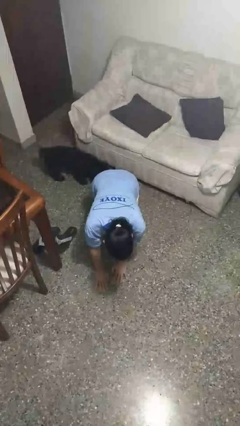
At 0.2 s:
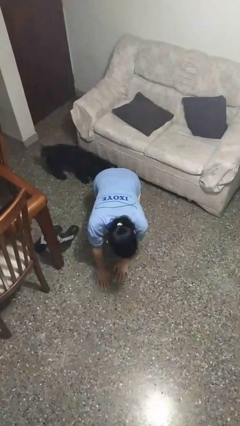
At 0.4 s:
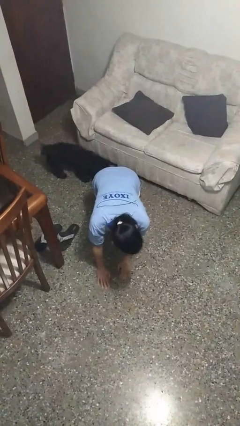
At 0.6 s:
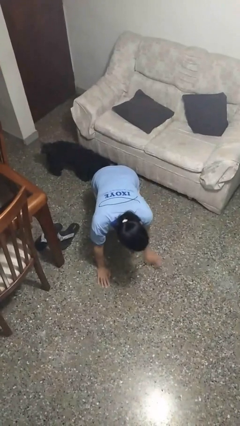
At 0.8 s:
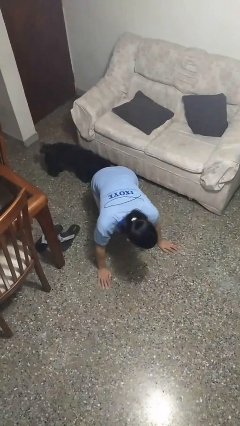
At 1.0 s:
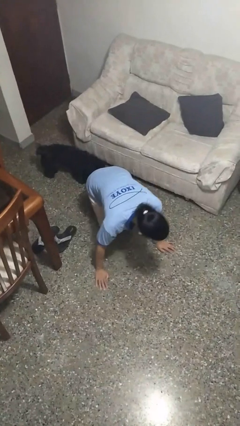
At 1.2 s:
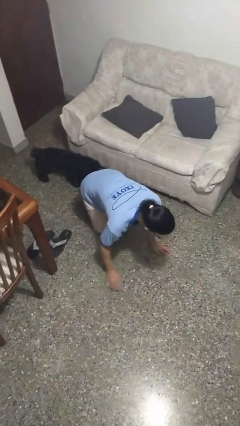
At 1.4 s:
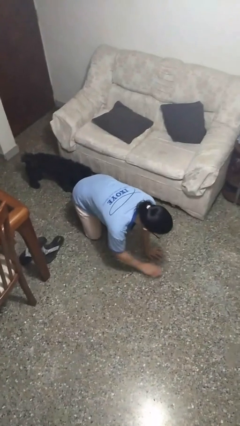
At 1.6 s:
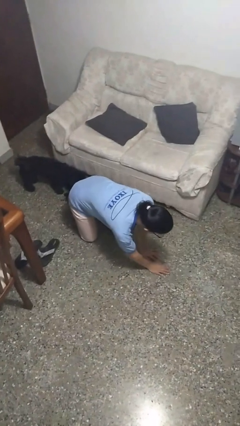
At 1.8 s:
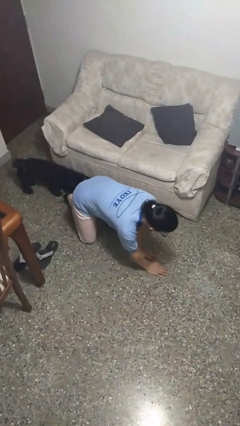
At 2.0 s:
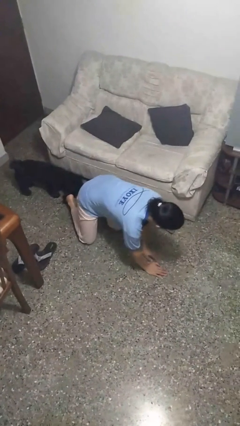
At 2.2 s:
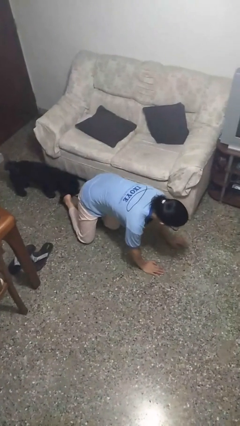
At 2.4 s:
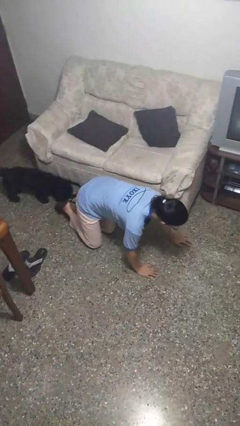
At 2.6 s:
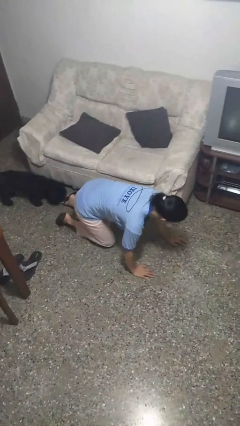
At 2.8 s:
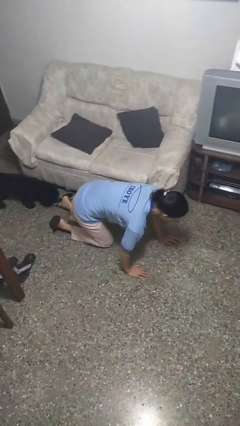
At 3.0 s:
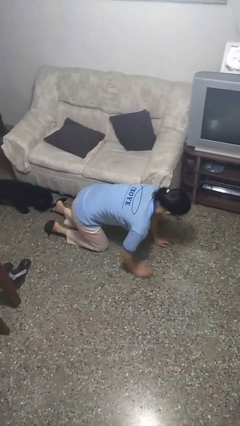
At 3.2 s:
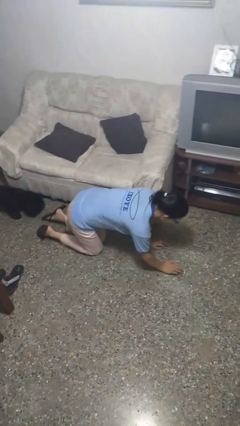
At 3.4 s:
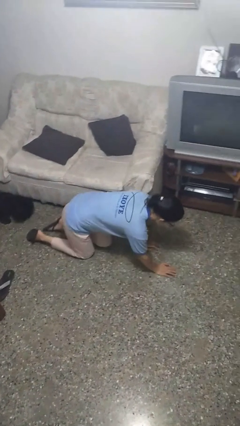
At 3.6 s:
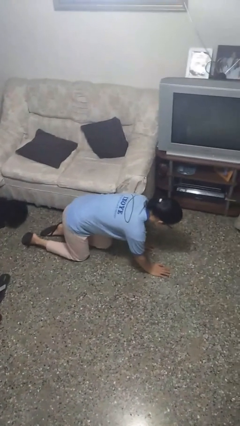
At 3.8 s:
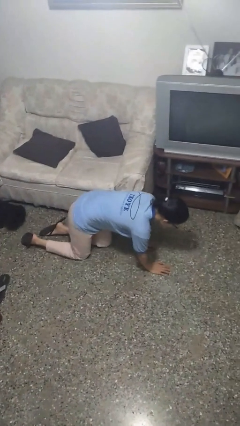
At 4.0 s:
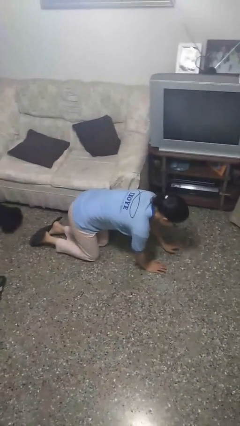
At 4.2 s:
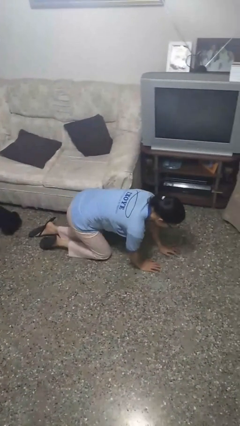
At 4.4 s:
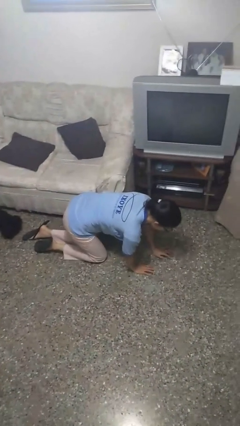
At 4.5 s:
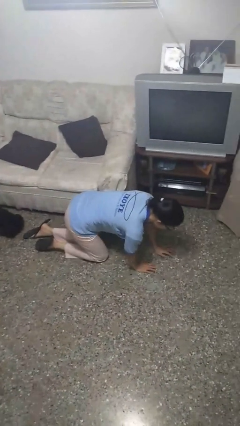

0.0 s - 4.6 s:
person crawls

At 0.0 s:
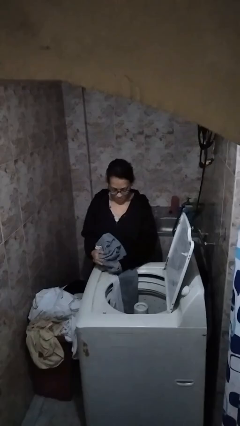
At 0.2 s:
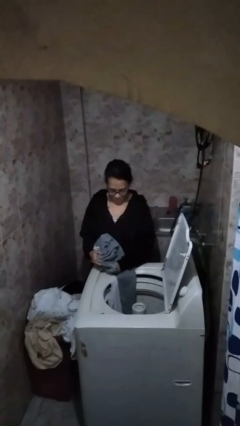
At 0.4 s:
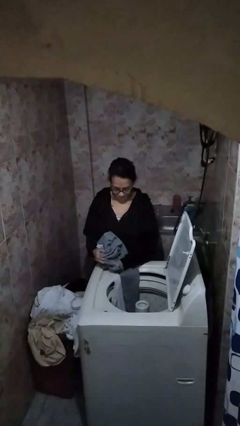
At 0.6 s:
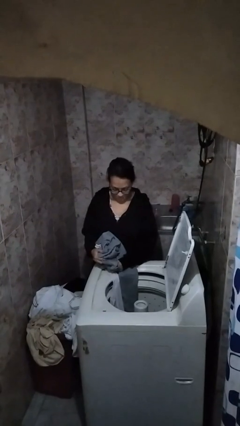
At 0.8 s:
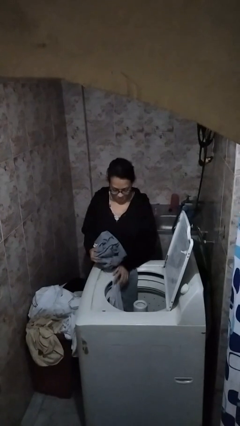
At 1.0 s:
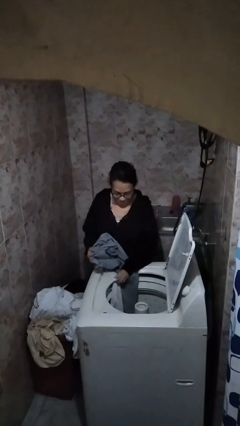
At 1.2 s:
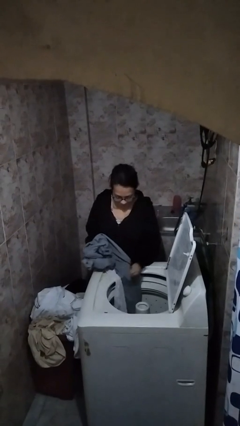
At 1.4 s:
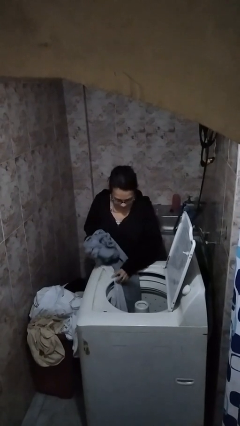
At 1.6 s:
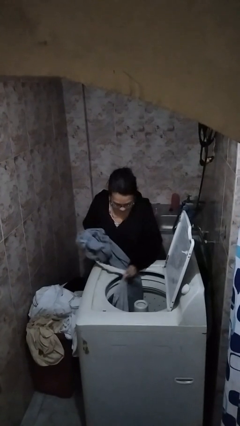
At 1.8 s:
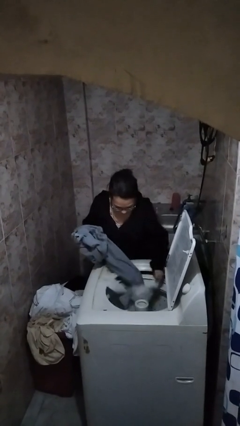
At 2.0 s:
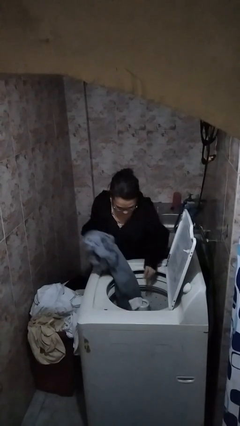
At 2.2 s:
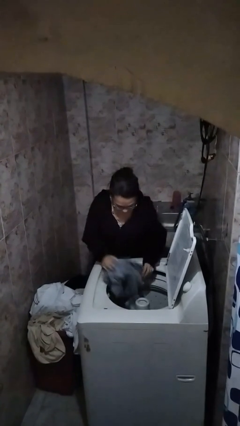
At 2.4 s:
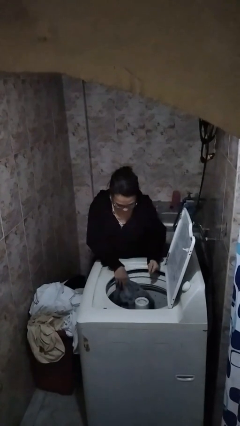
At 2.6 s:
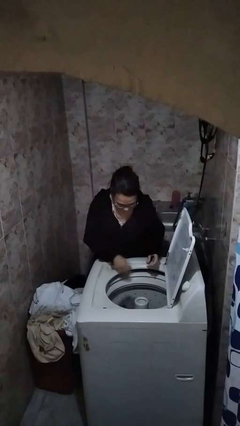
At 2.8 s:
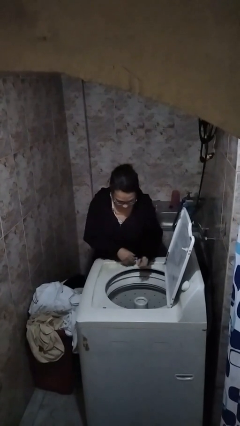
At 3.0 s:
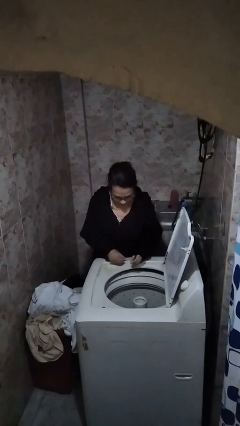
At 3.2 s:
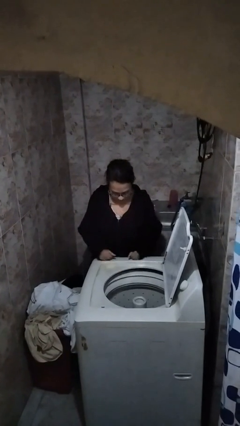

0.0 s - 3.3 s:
person loads dryer

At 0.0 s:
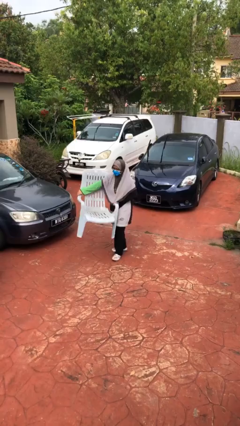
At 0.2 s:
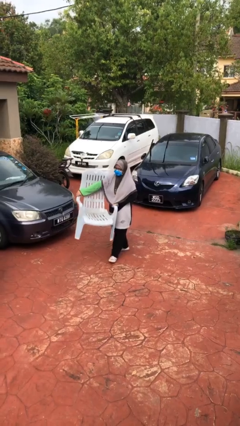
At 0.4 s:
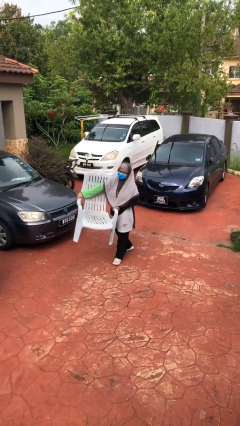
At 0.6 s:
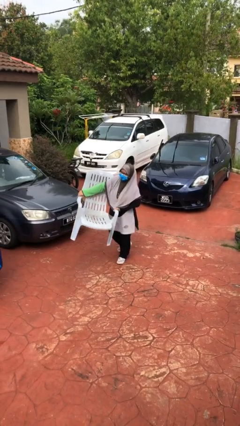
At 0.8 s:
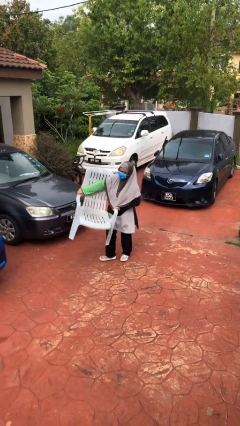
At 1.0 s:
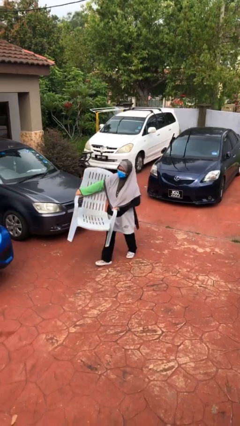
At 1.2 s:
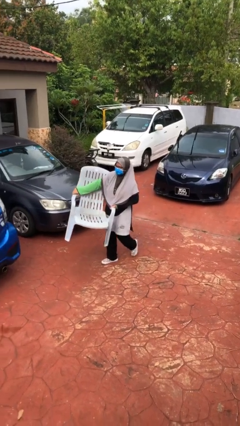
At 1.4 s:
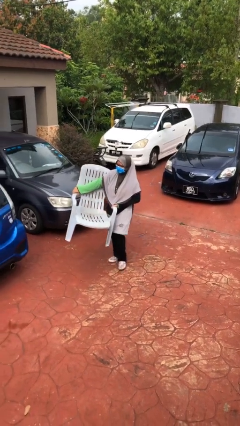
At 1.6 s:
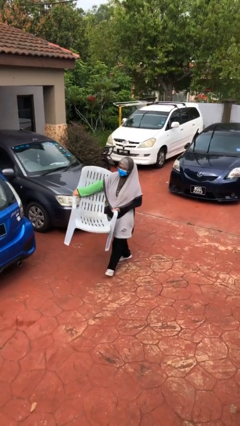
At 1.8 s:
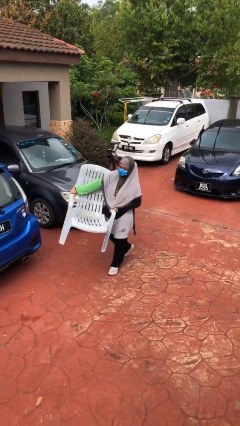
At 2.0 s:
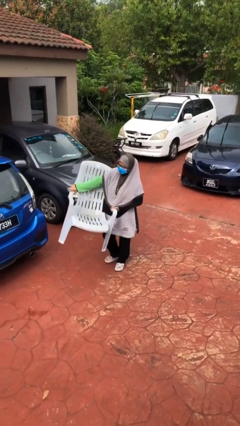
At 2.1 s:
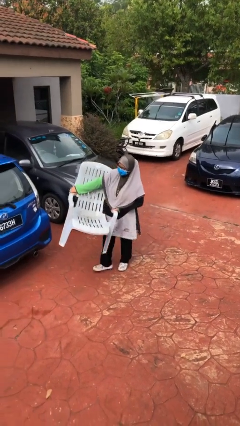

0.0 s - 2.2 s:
person carries heavy object

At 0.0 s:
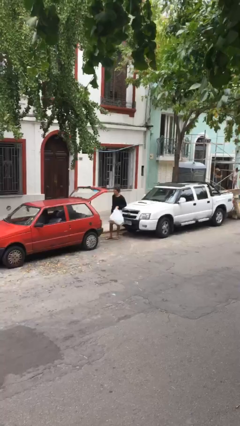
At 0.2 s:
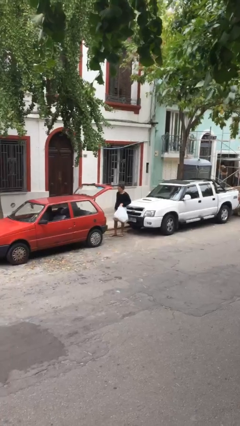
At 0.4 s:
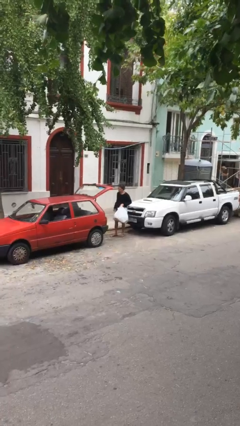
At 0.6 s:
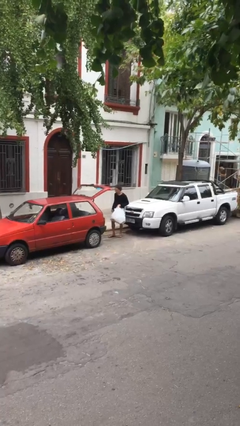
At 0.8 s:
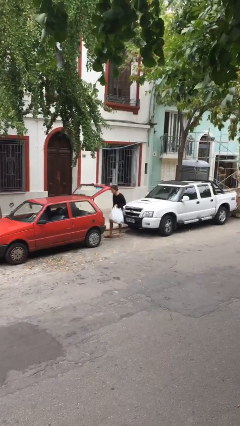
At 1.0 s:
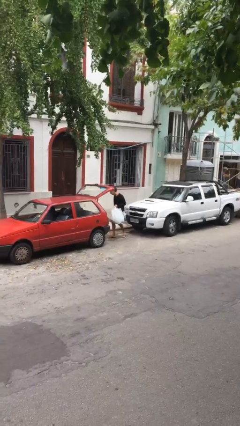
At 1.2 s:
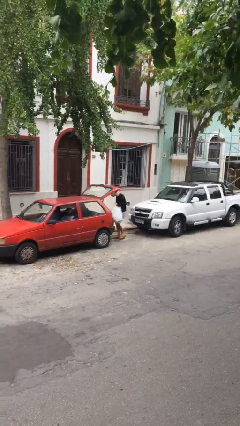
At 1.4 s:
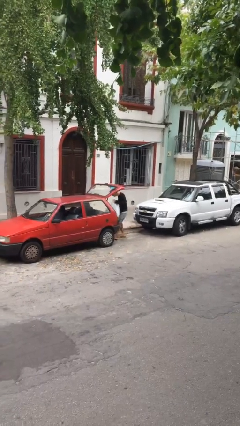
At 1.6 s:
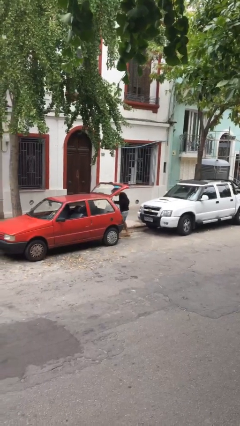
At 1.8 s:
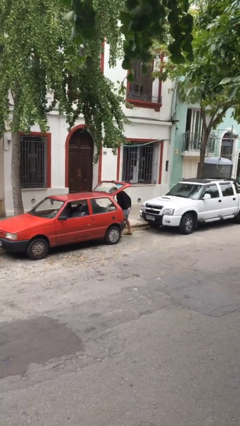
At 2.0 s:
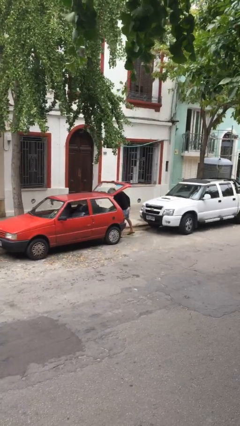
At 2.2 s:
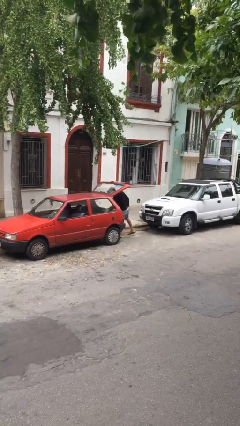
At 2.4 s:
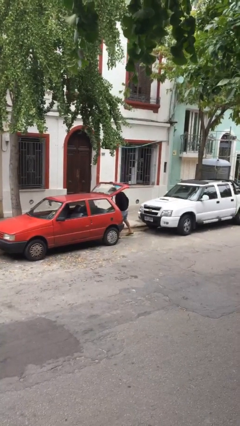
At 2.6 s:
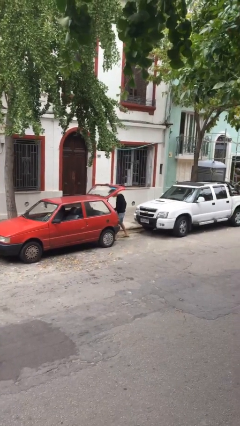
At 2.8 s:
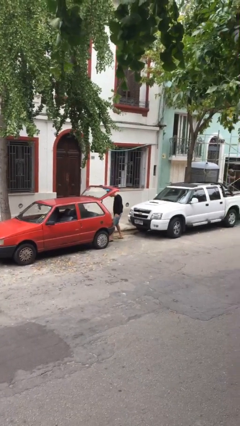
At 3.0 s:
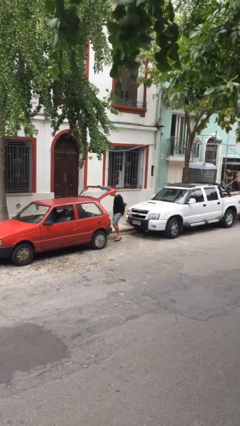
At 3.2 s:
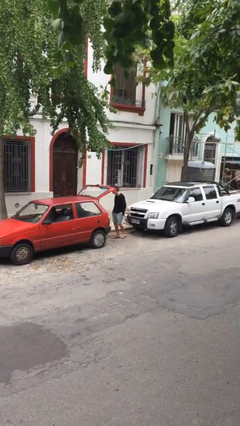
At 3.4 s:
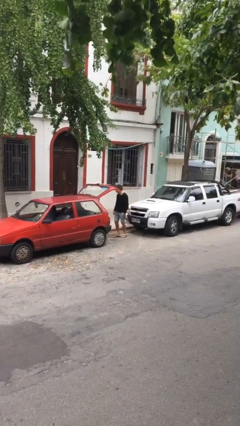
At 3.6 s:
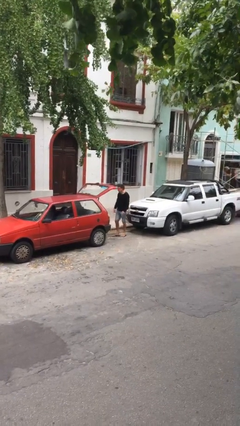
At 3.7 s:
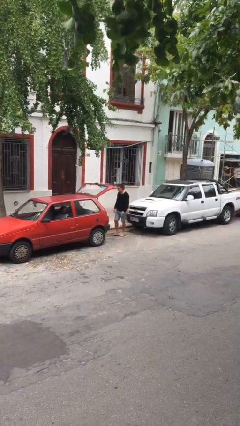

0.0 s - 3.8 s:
person loads car

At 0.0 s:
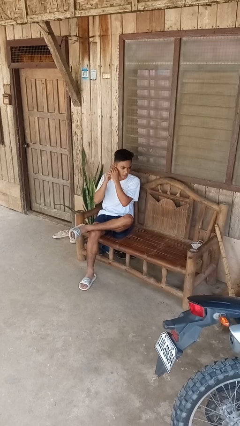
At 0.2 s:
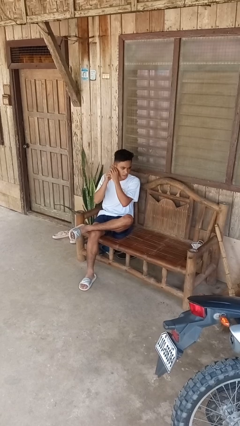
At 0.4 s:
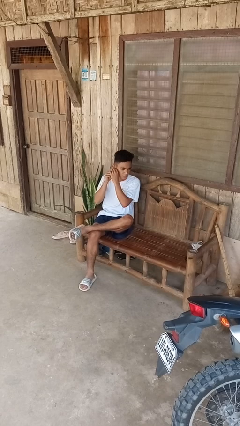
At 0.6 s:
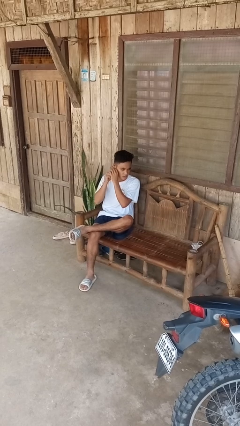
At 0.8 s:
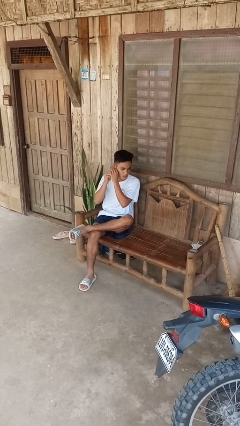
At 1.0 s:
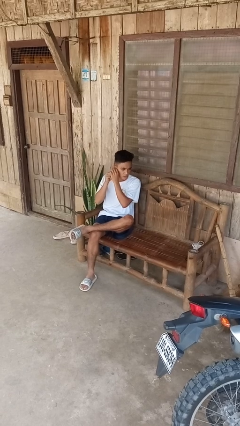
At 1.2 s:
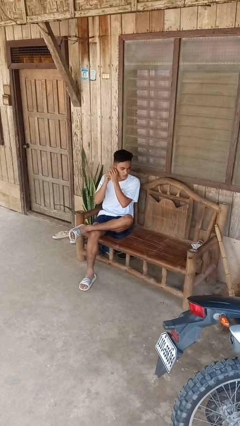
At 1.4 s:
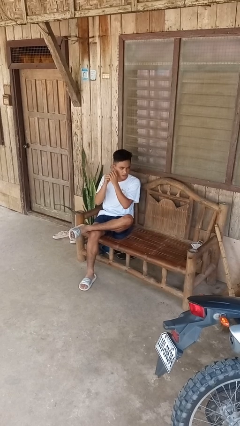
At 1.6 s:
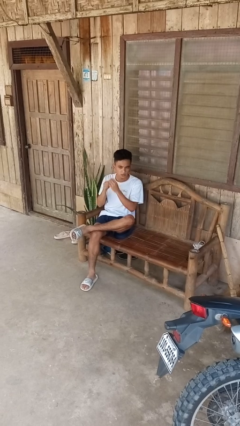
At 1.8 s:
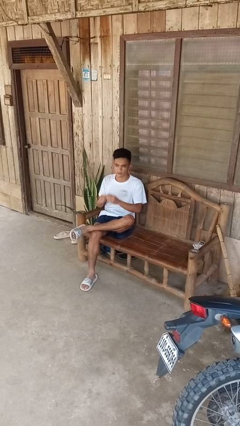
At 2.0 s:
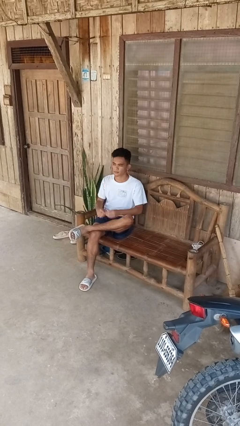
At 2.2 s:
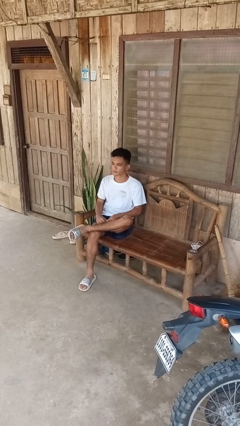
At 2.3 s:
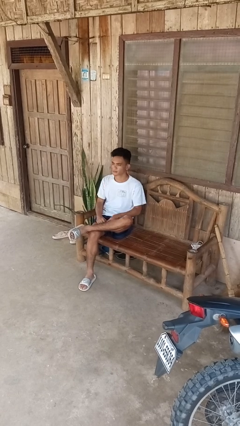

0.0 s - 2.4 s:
person takes off earrings

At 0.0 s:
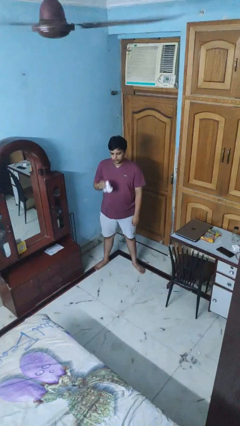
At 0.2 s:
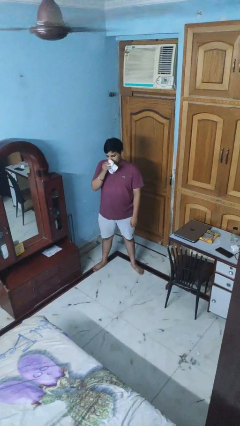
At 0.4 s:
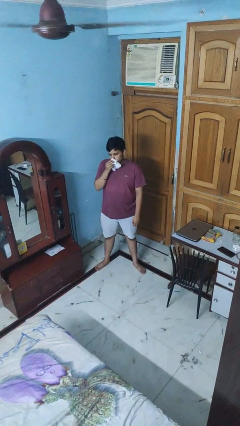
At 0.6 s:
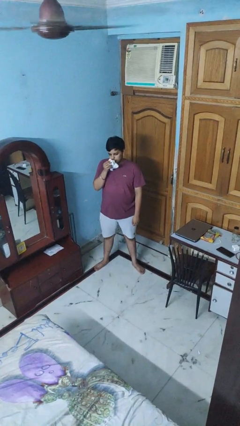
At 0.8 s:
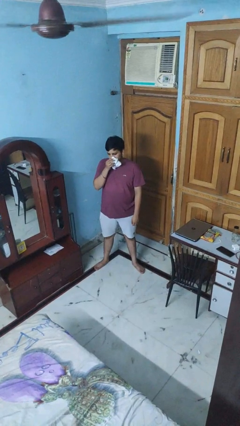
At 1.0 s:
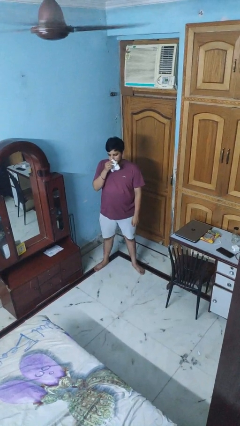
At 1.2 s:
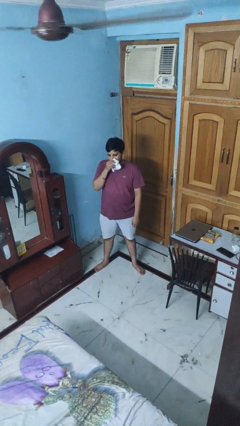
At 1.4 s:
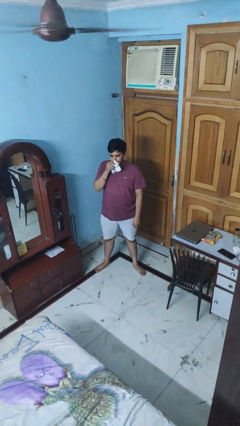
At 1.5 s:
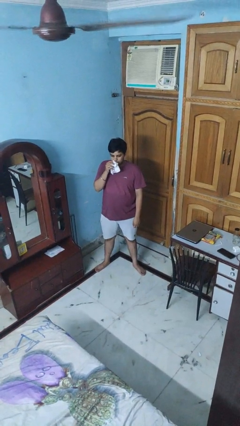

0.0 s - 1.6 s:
person wipes mouth with napkin
